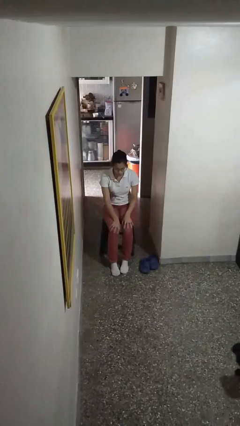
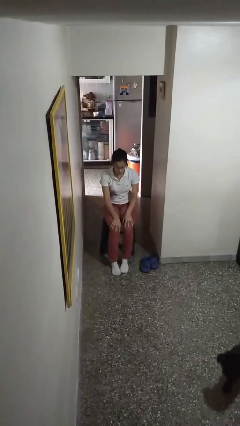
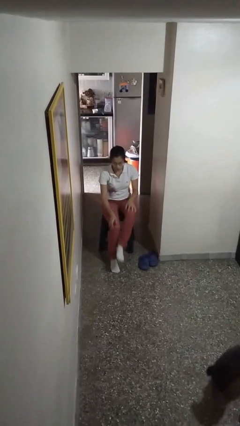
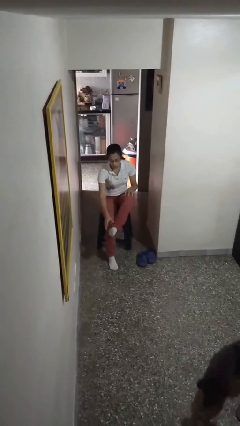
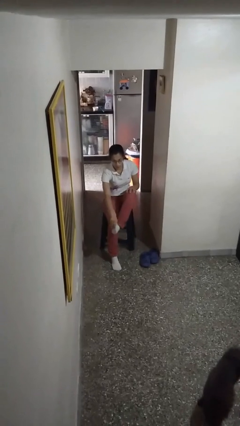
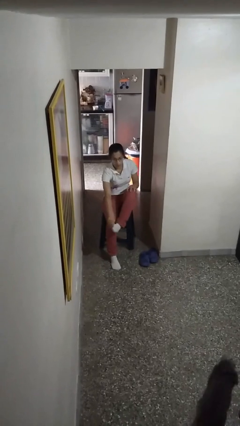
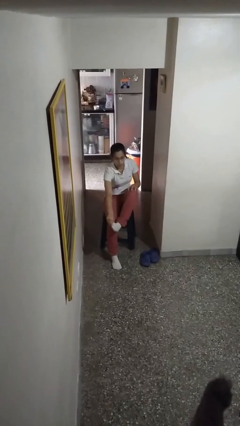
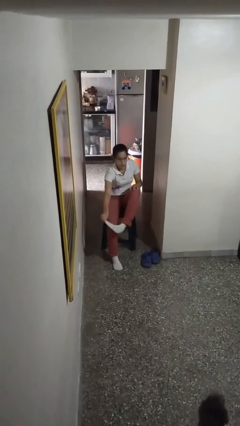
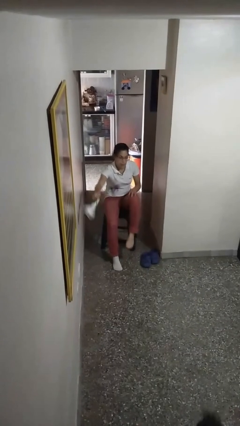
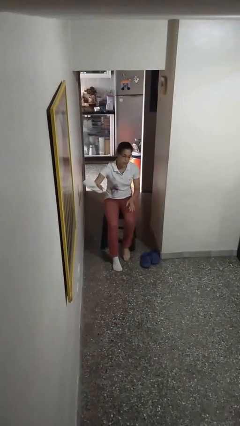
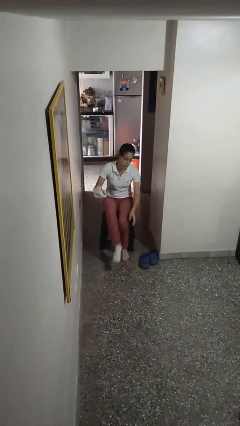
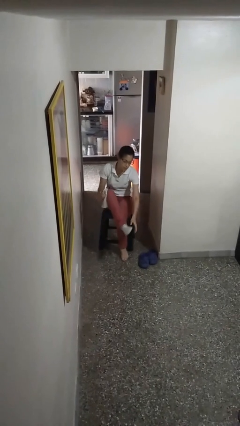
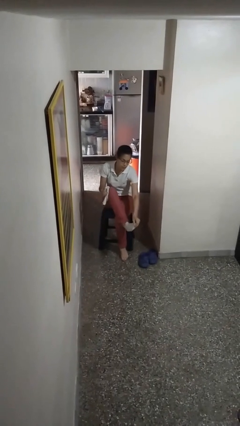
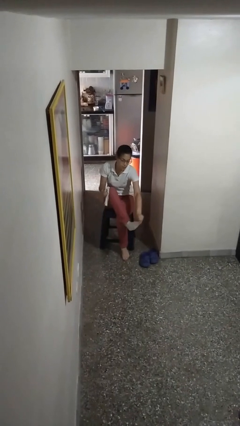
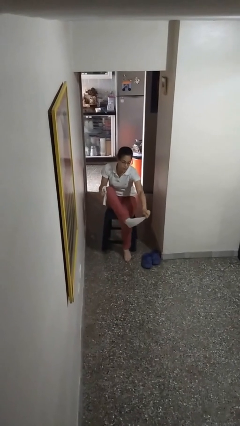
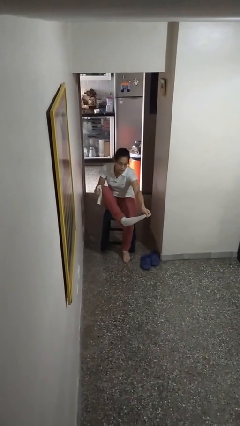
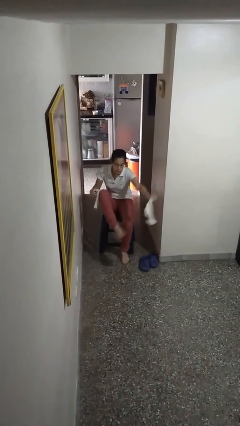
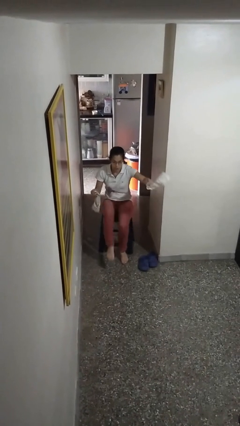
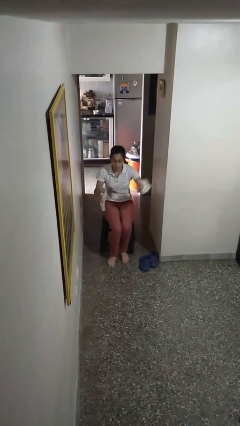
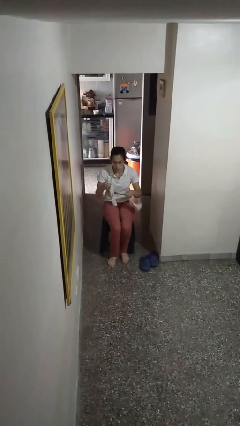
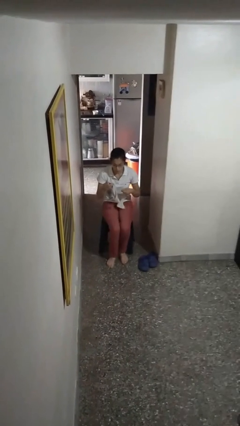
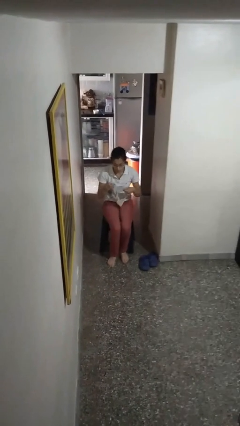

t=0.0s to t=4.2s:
person takes off socks

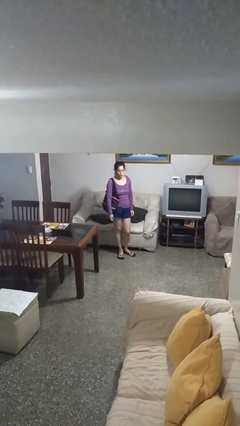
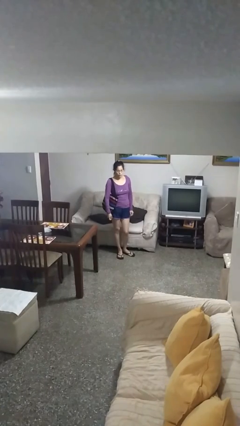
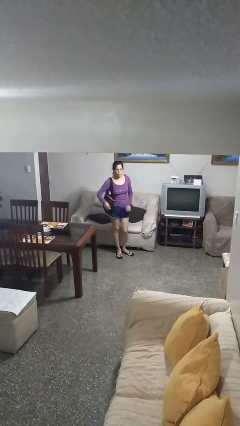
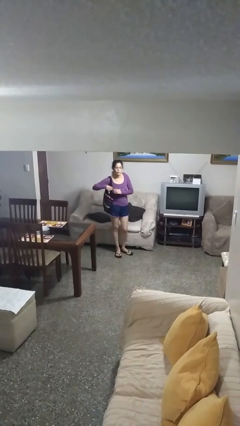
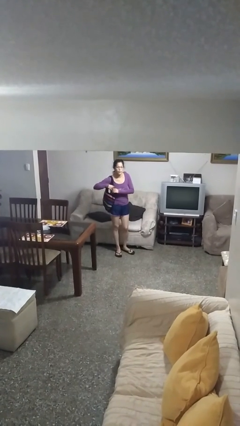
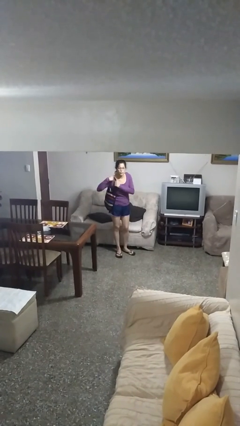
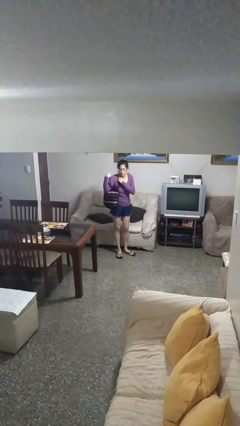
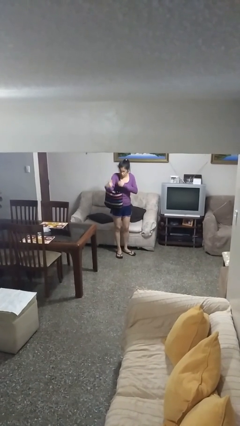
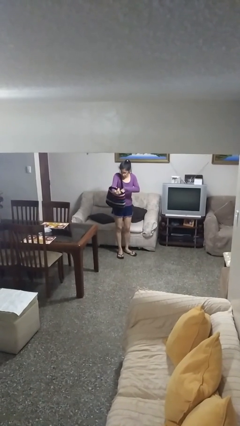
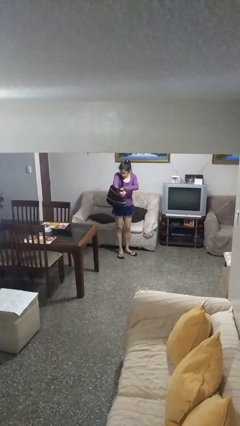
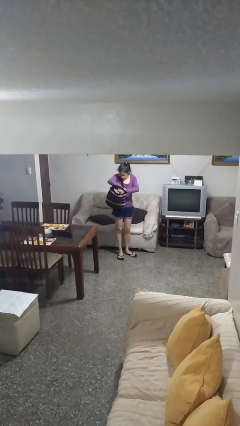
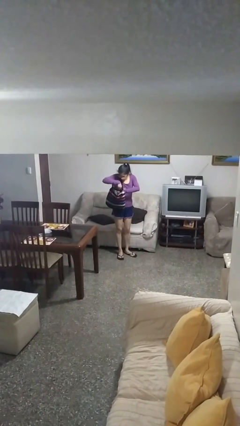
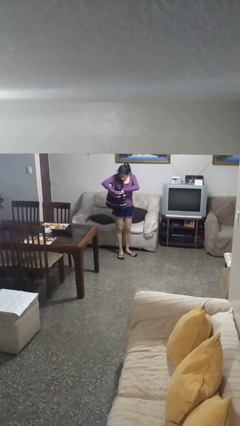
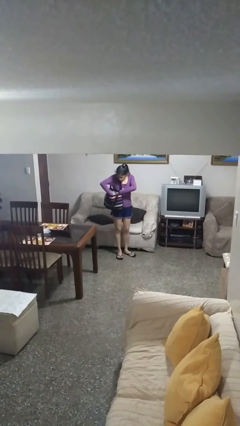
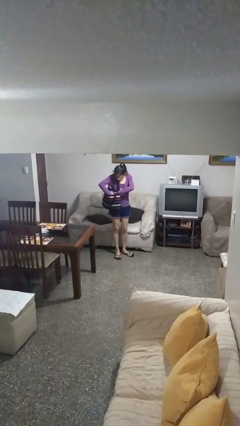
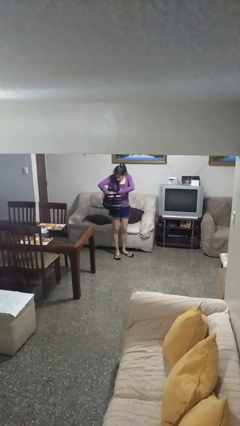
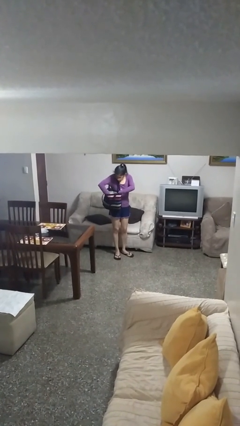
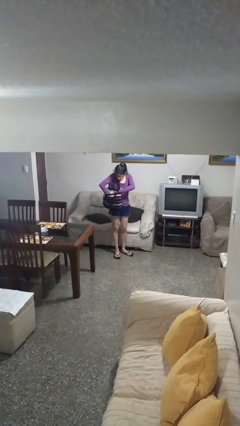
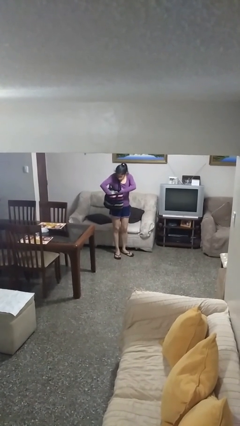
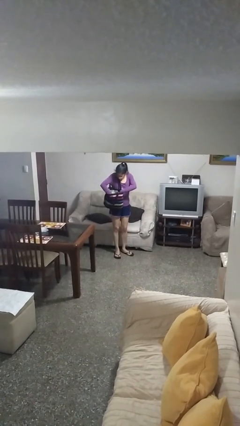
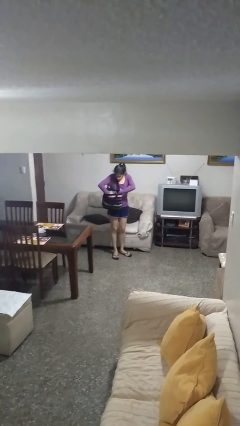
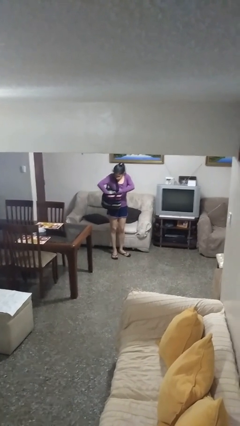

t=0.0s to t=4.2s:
person searches in purse

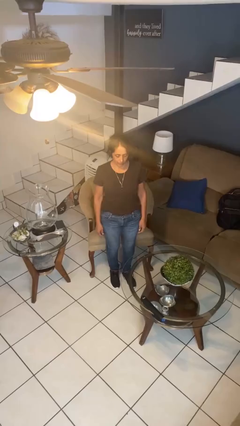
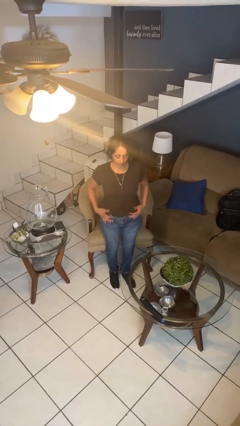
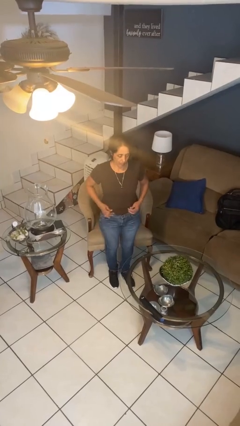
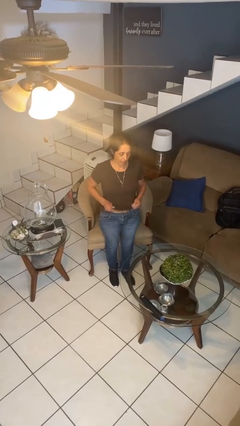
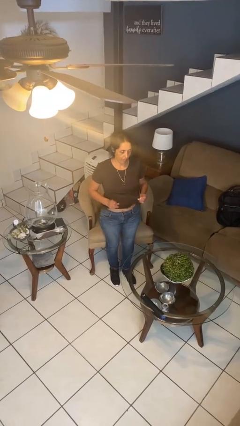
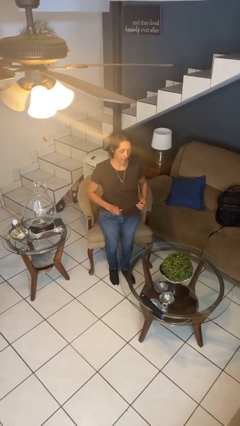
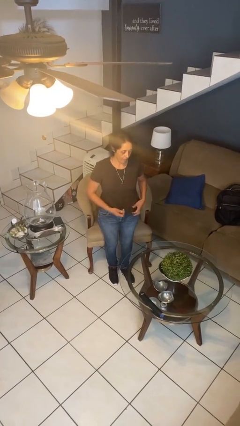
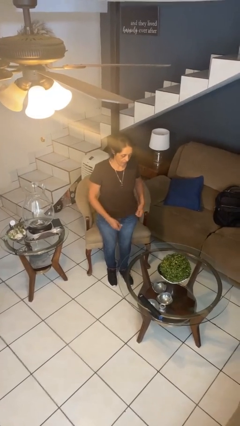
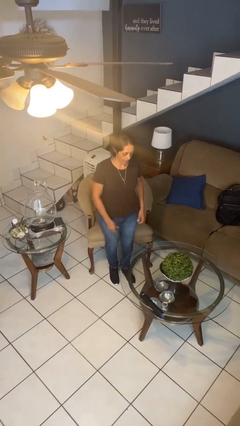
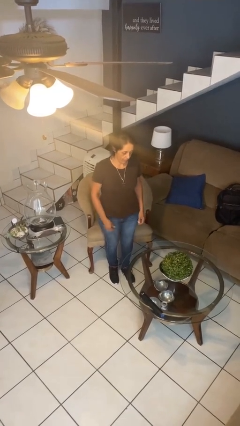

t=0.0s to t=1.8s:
person untucks shirt

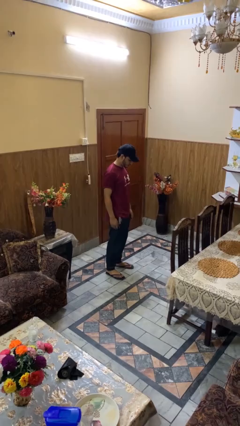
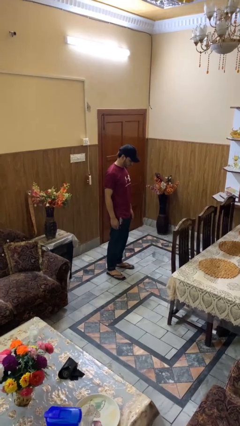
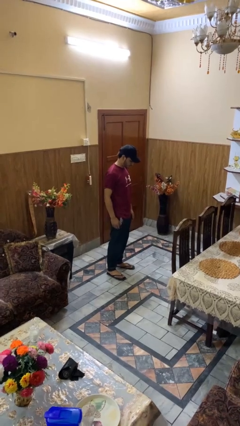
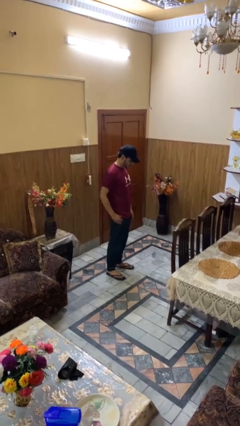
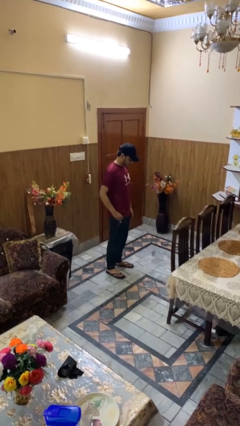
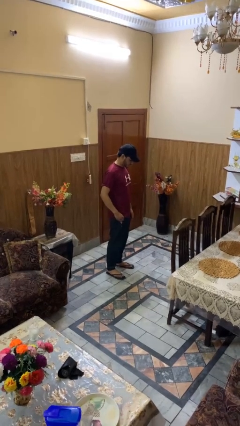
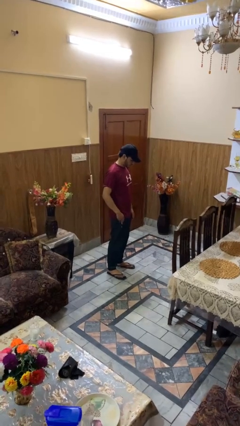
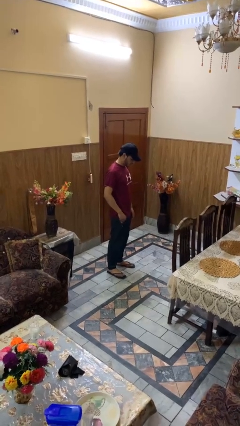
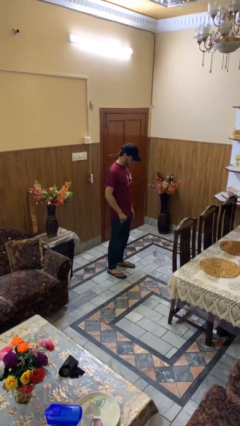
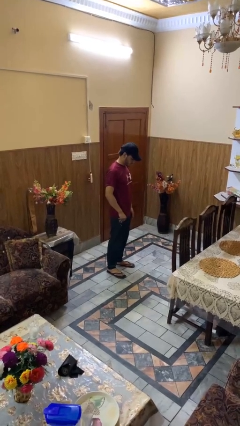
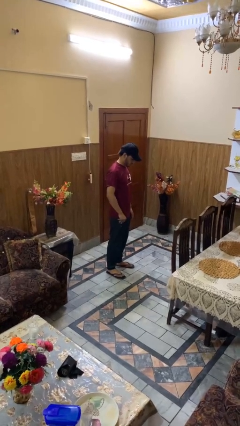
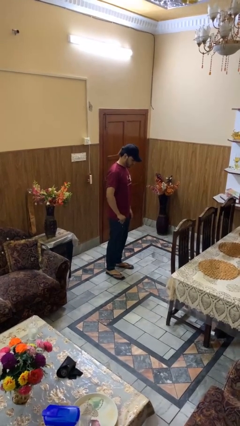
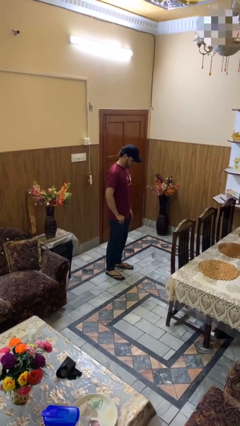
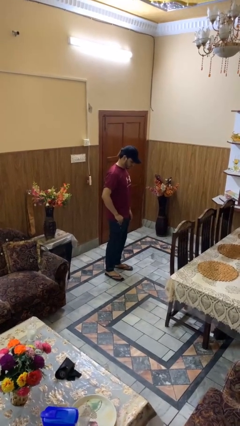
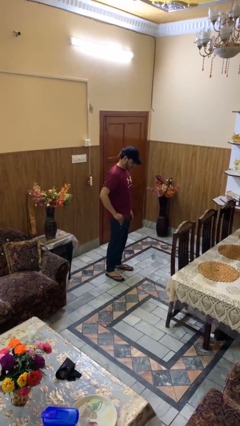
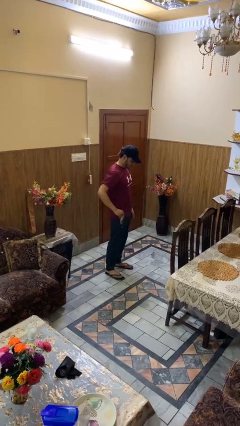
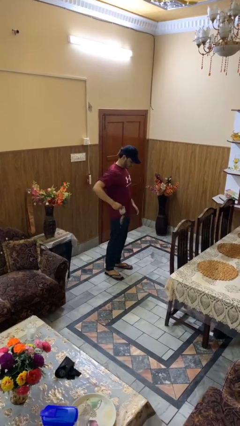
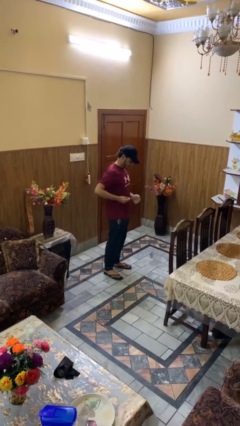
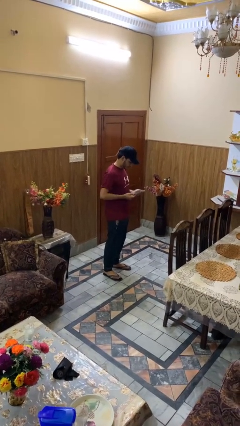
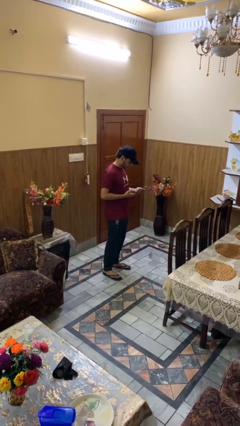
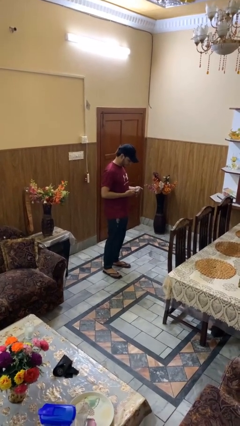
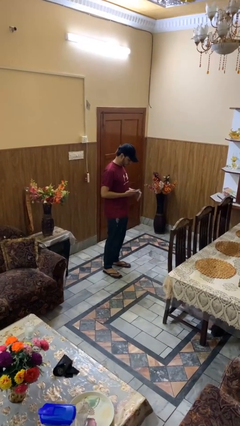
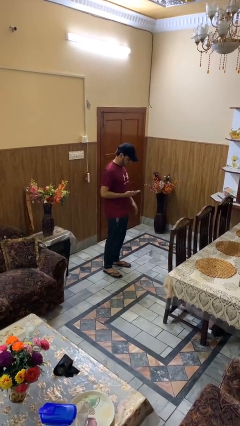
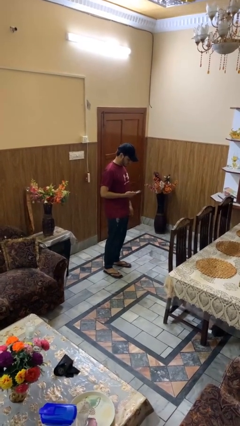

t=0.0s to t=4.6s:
person takes phone from pocket

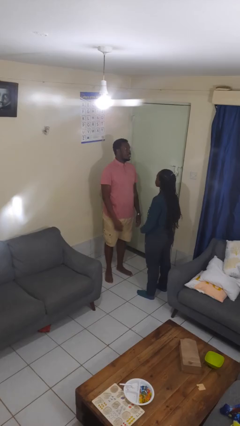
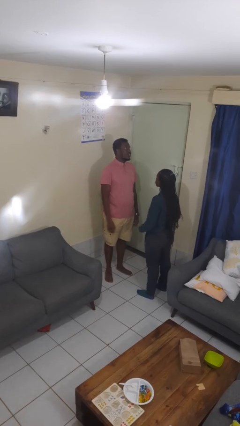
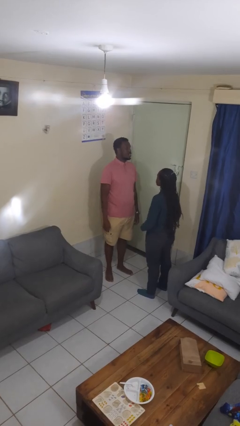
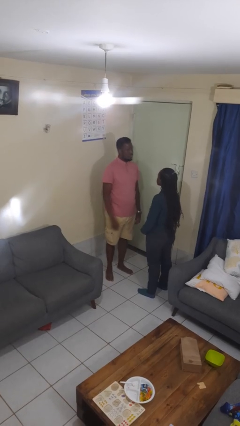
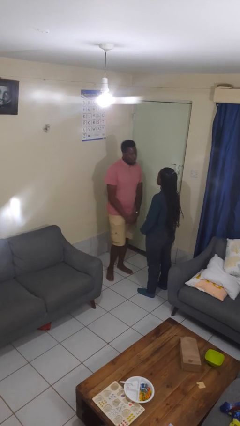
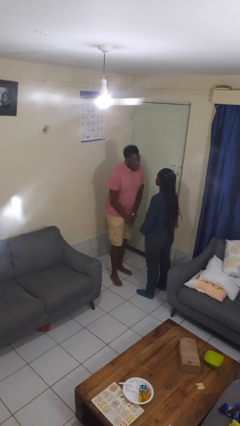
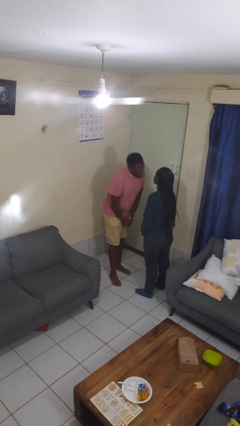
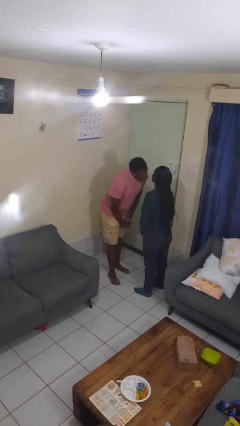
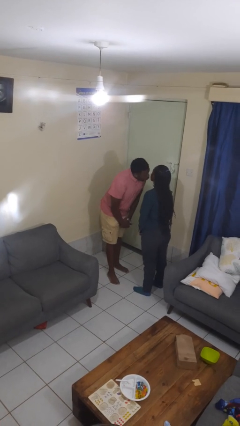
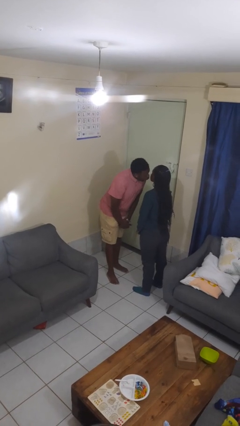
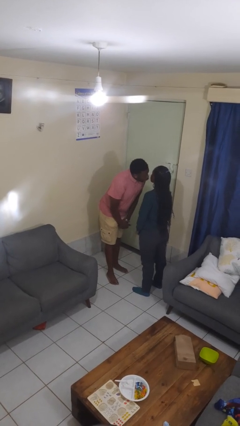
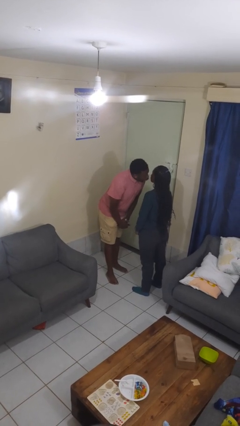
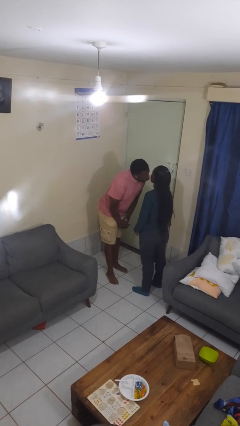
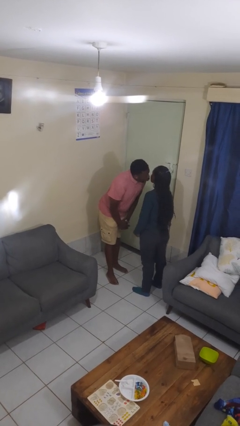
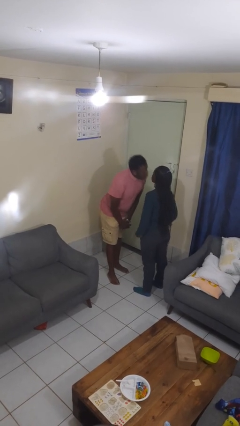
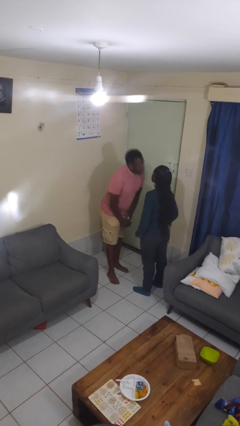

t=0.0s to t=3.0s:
person kisses cheek of person

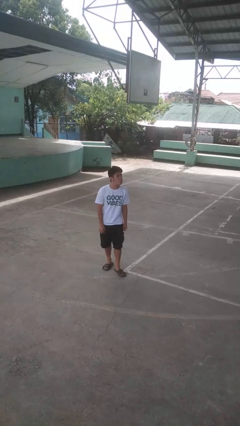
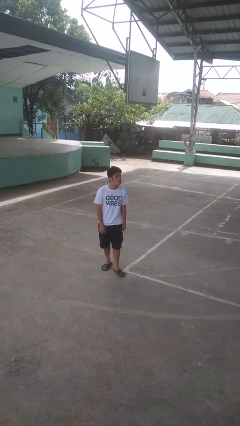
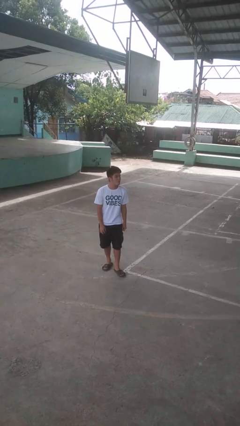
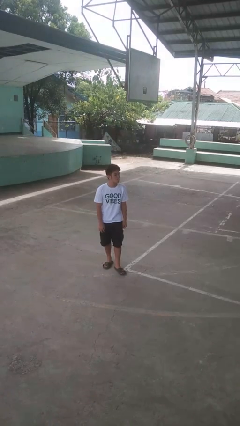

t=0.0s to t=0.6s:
person sticks out tongue
